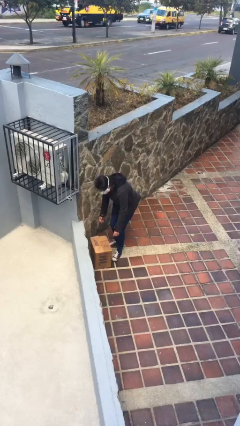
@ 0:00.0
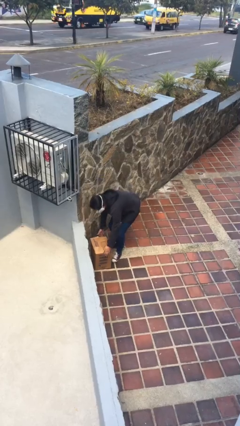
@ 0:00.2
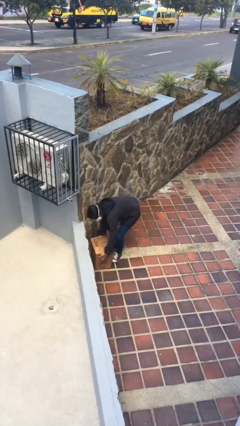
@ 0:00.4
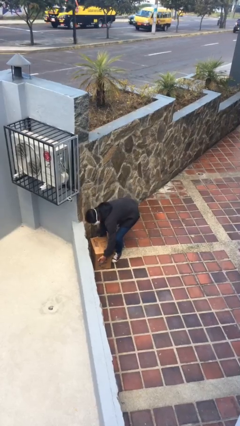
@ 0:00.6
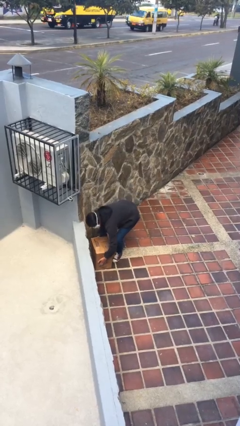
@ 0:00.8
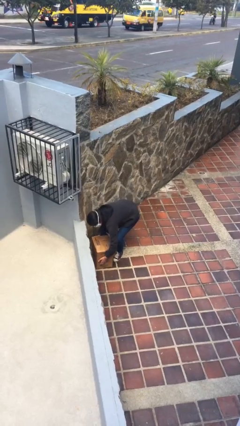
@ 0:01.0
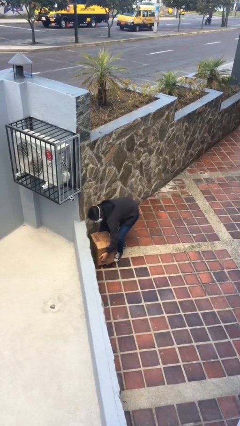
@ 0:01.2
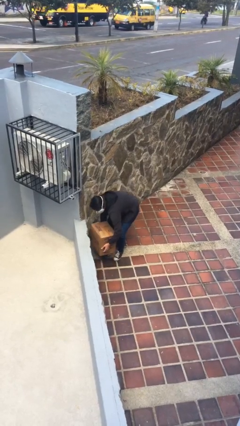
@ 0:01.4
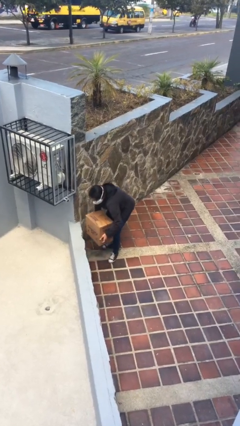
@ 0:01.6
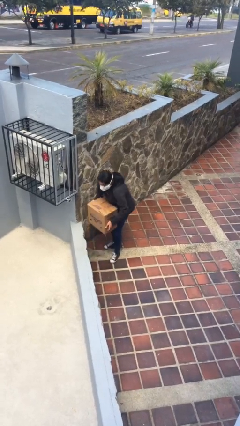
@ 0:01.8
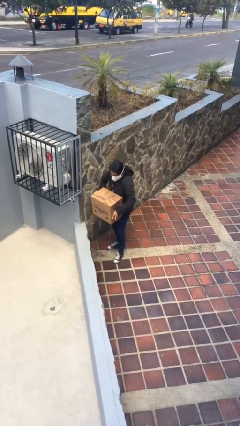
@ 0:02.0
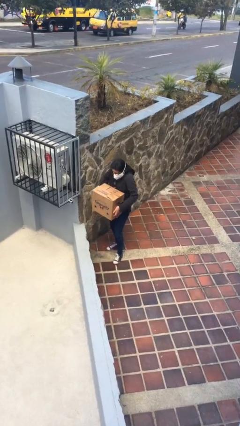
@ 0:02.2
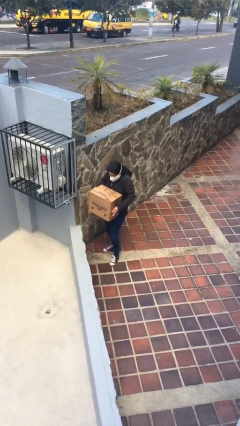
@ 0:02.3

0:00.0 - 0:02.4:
person picks up object from floor

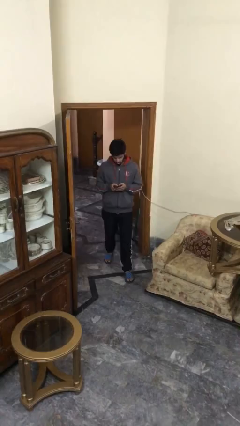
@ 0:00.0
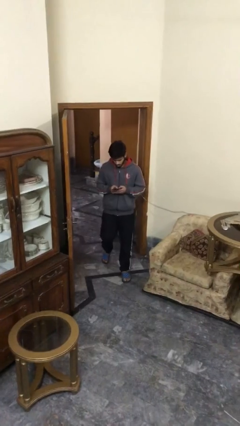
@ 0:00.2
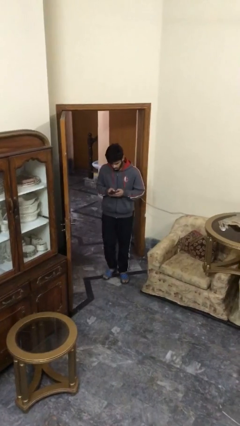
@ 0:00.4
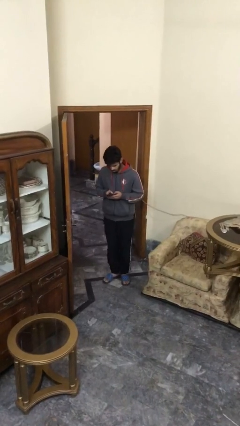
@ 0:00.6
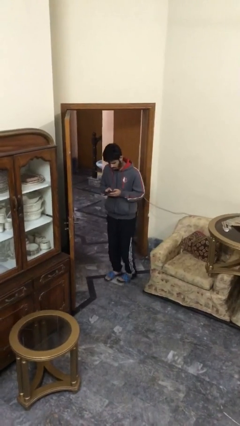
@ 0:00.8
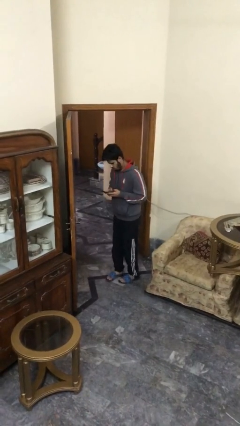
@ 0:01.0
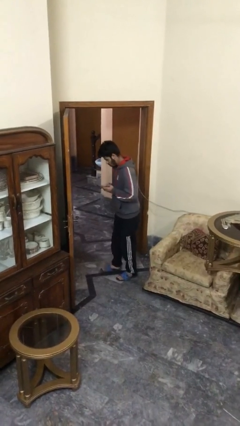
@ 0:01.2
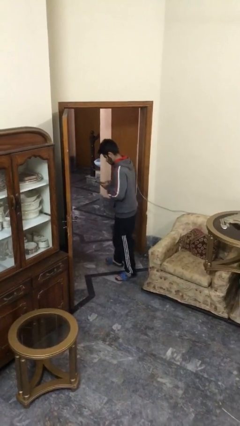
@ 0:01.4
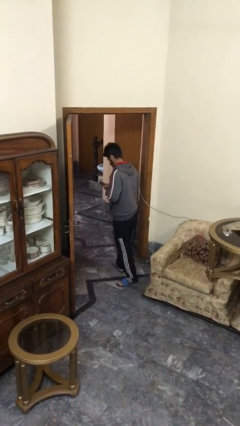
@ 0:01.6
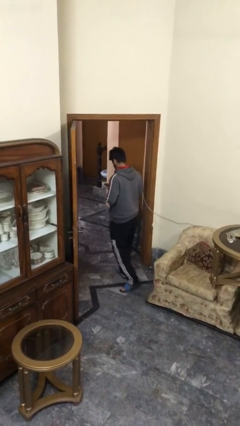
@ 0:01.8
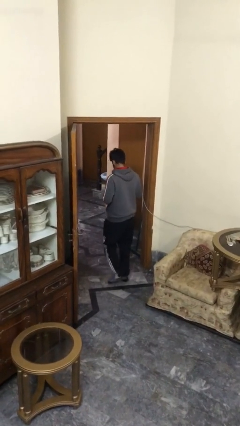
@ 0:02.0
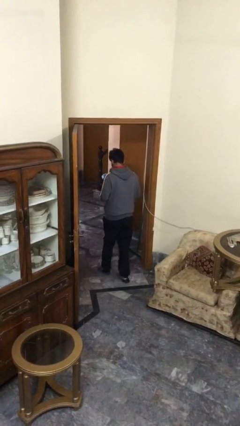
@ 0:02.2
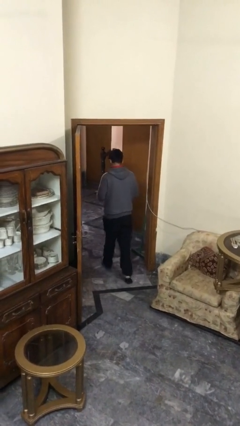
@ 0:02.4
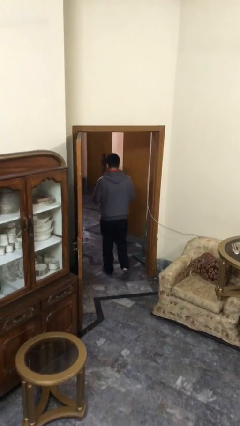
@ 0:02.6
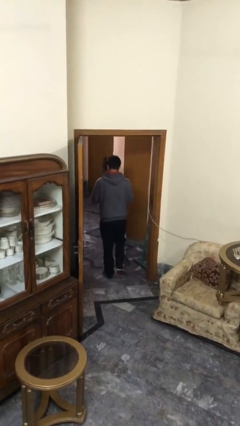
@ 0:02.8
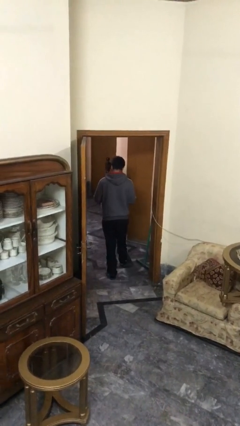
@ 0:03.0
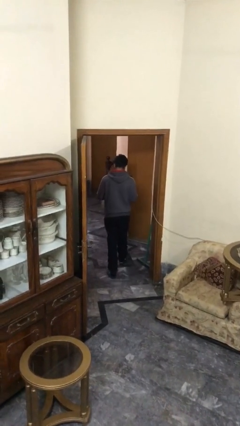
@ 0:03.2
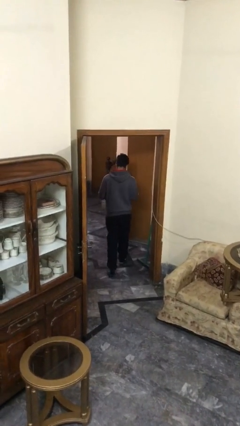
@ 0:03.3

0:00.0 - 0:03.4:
person exits scene through structure

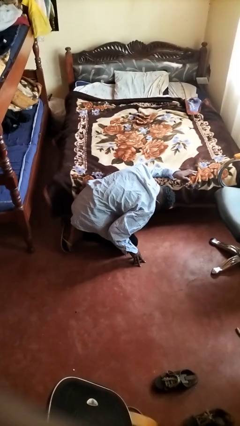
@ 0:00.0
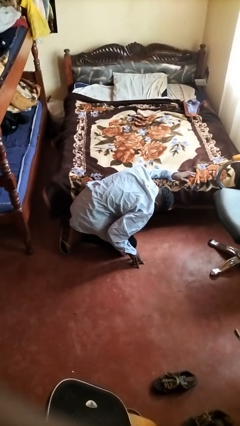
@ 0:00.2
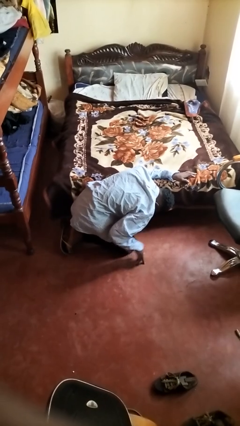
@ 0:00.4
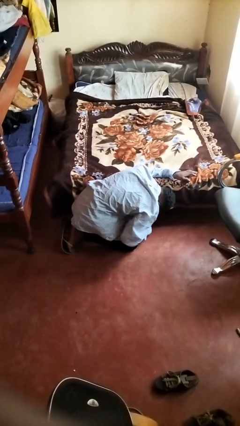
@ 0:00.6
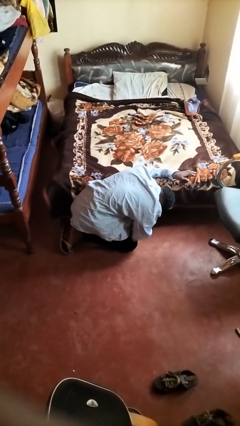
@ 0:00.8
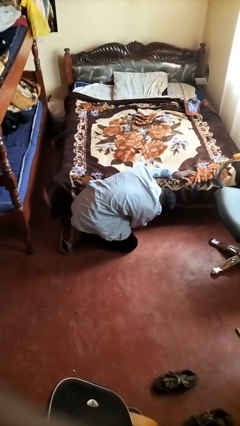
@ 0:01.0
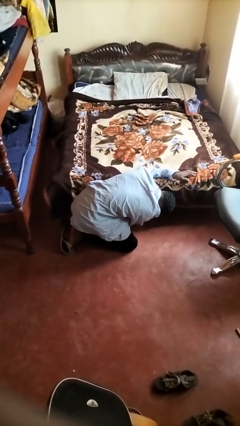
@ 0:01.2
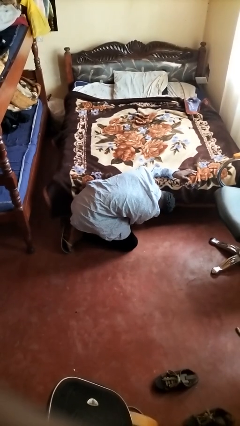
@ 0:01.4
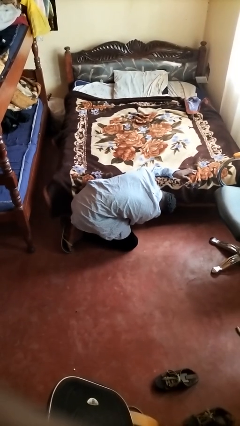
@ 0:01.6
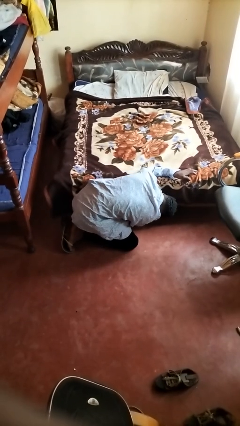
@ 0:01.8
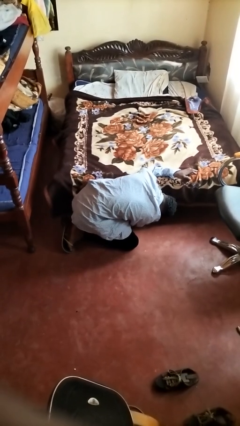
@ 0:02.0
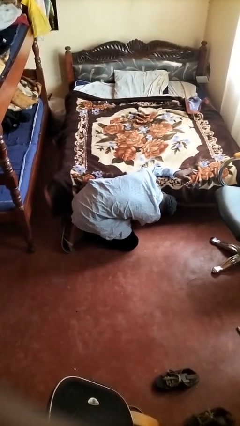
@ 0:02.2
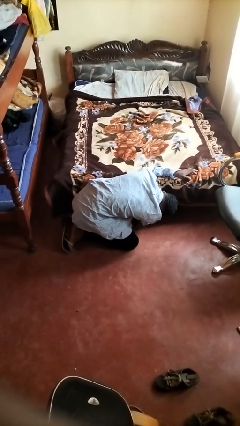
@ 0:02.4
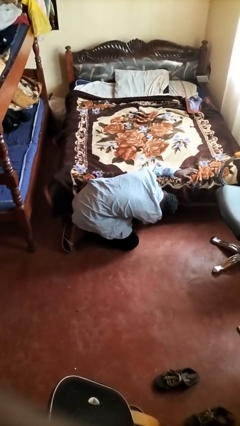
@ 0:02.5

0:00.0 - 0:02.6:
person searches under bed

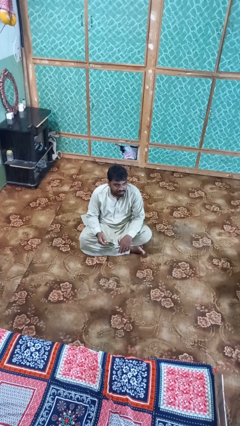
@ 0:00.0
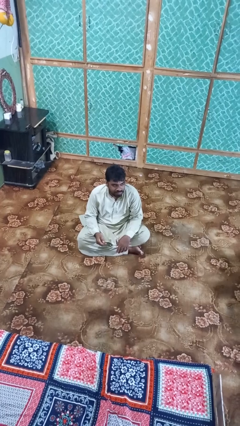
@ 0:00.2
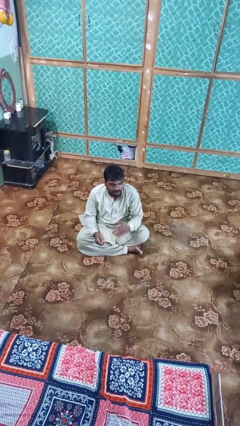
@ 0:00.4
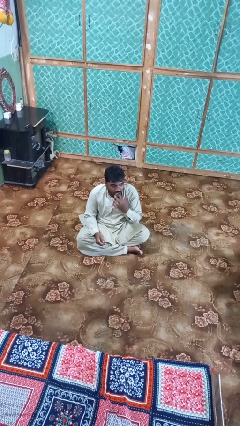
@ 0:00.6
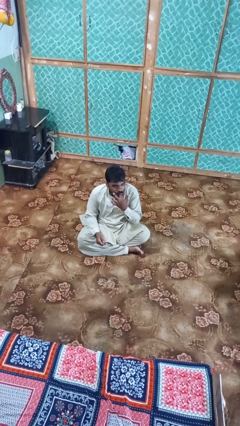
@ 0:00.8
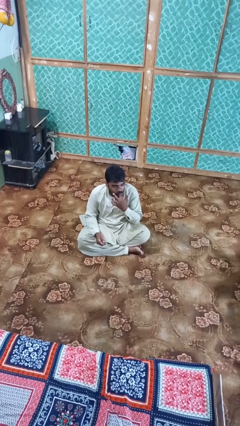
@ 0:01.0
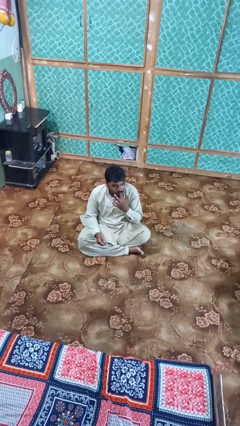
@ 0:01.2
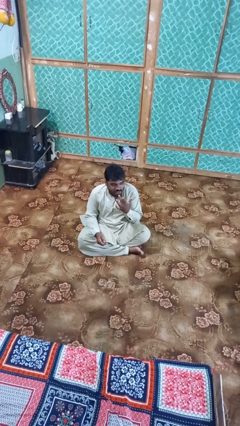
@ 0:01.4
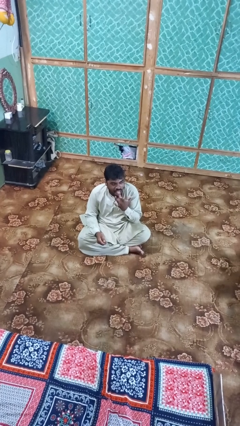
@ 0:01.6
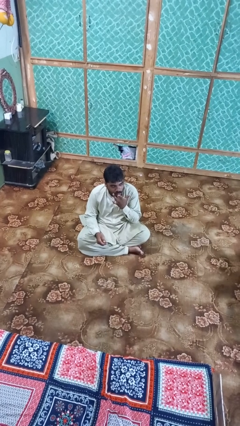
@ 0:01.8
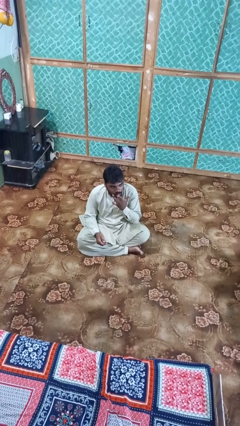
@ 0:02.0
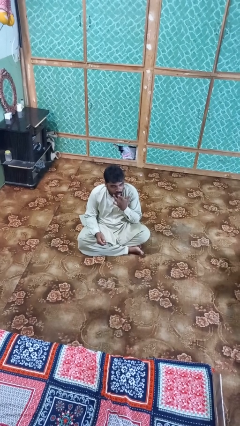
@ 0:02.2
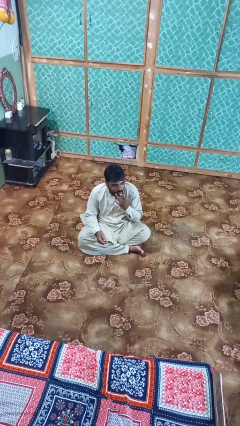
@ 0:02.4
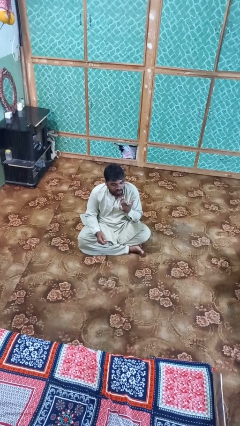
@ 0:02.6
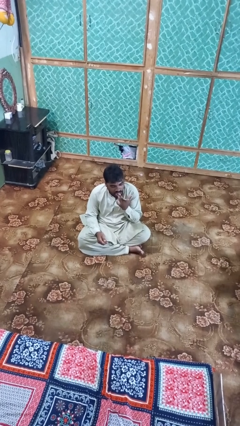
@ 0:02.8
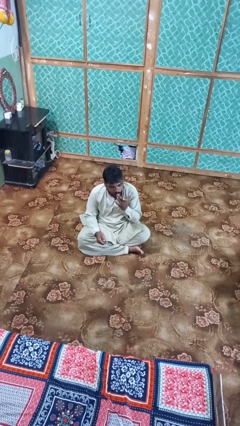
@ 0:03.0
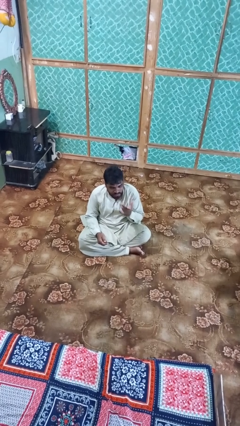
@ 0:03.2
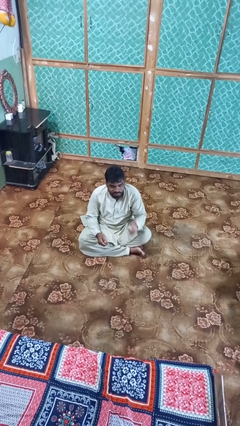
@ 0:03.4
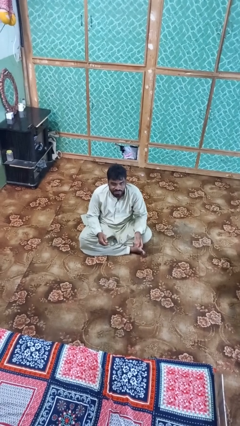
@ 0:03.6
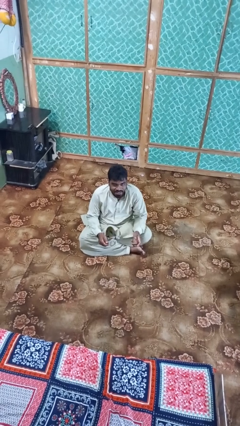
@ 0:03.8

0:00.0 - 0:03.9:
person licks fingers

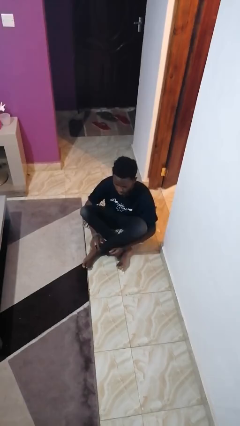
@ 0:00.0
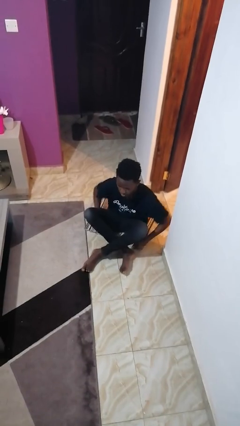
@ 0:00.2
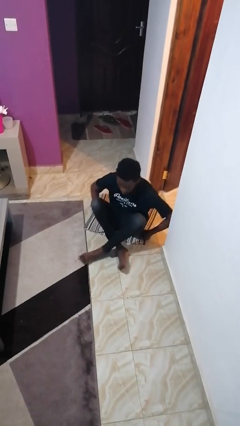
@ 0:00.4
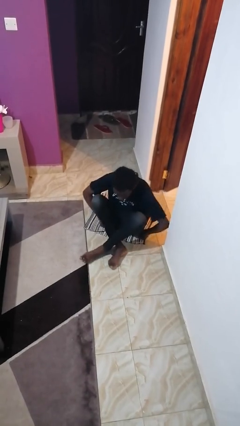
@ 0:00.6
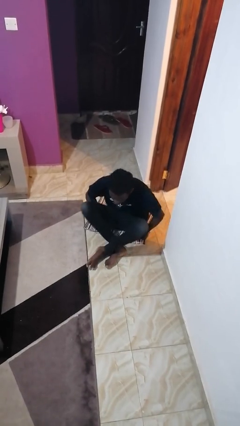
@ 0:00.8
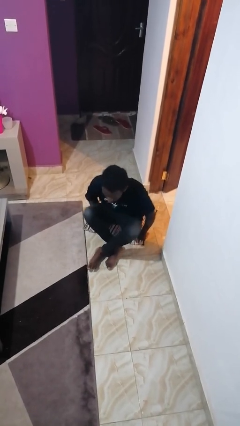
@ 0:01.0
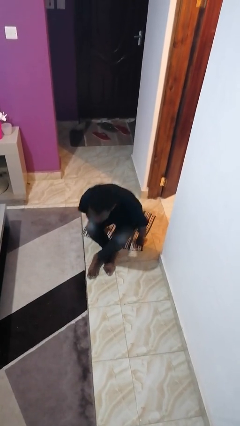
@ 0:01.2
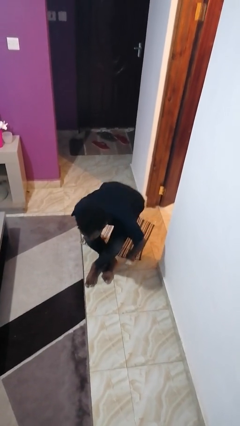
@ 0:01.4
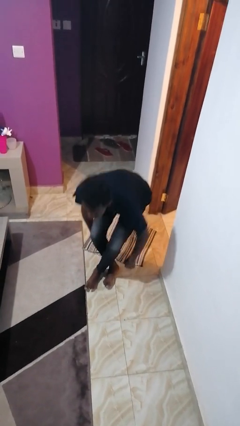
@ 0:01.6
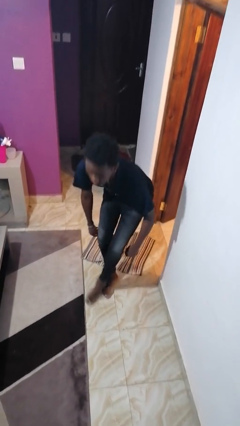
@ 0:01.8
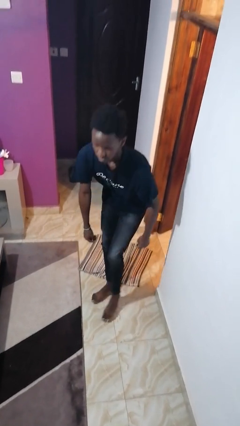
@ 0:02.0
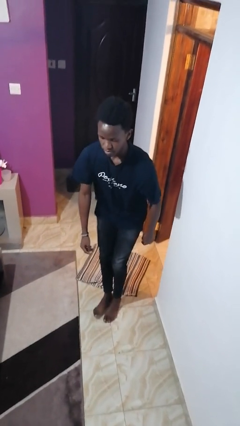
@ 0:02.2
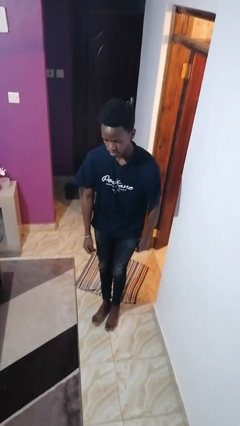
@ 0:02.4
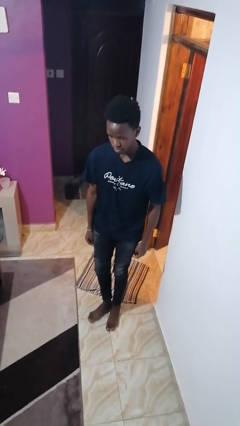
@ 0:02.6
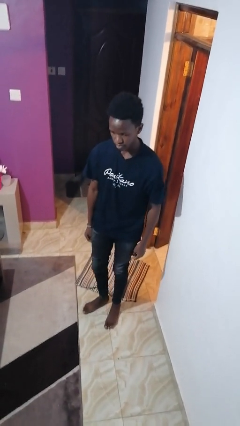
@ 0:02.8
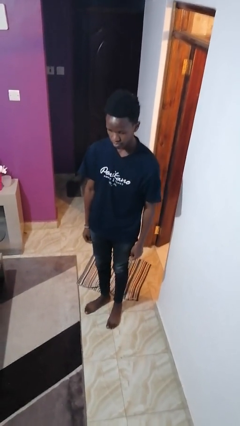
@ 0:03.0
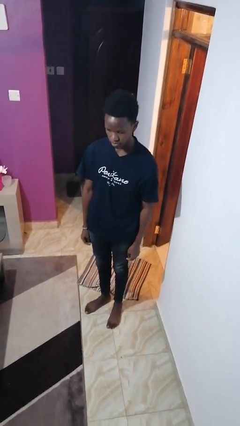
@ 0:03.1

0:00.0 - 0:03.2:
person stands up from floor

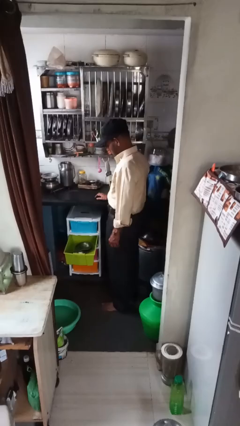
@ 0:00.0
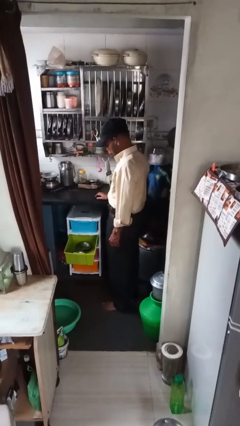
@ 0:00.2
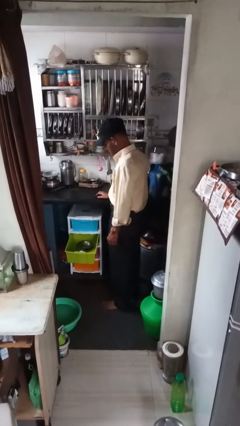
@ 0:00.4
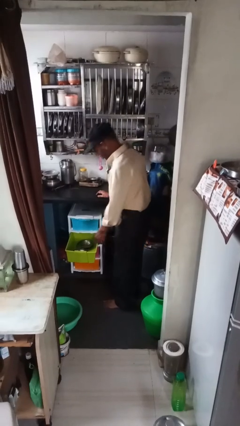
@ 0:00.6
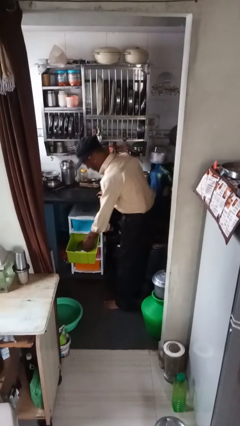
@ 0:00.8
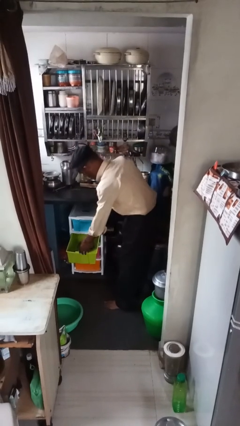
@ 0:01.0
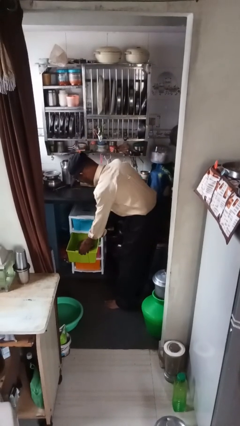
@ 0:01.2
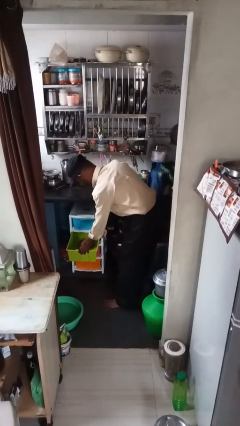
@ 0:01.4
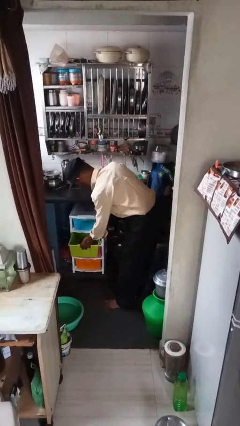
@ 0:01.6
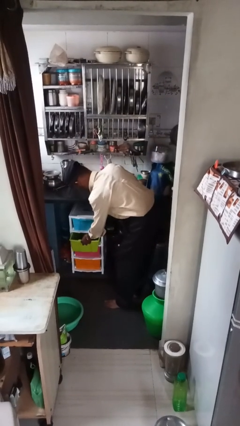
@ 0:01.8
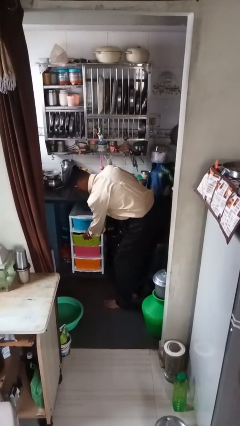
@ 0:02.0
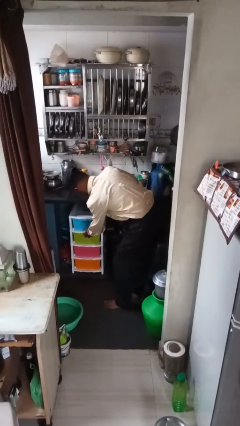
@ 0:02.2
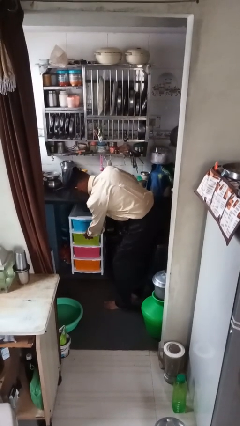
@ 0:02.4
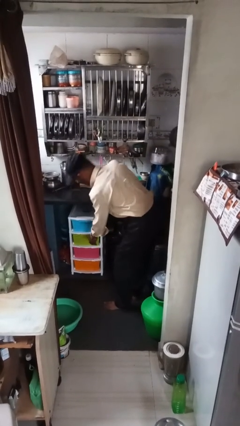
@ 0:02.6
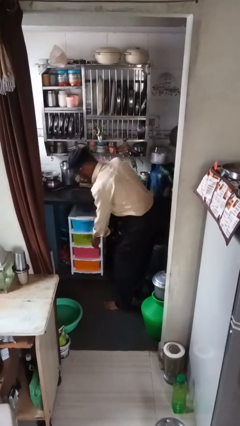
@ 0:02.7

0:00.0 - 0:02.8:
person closes kitchen drawer
